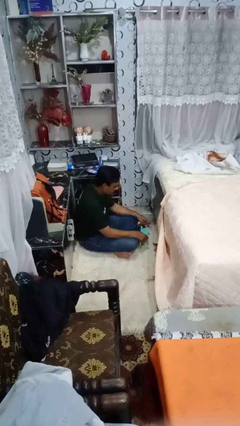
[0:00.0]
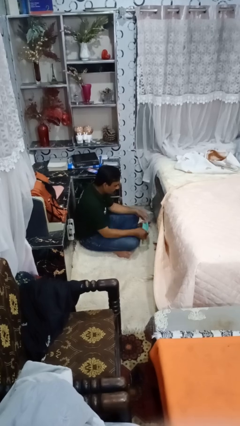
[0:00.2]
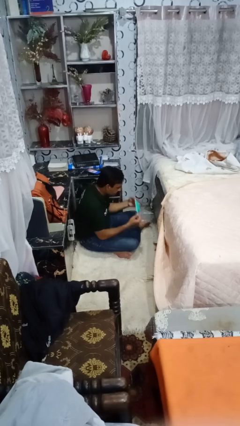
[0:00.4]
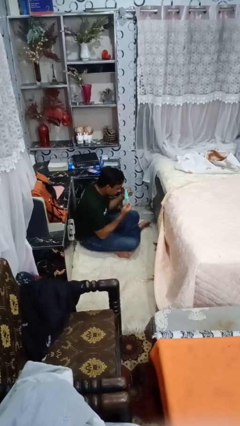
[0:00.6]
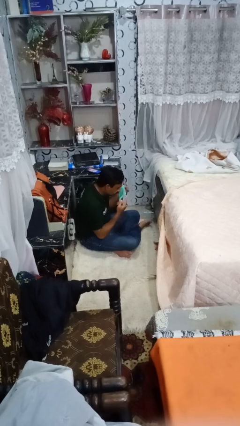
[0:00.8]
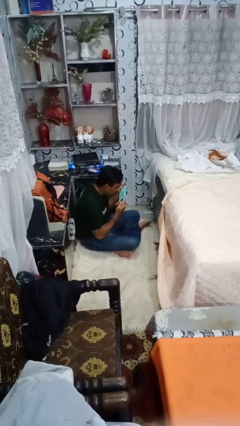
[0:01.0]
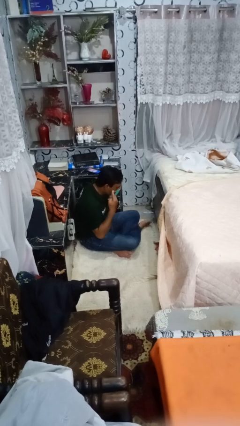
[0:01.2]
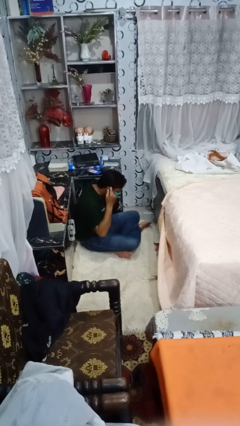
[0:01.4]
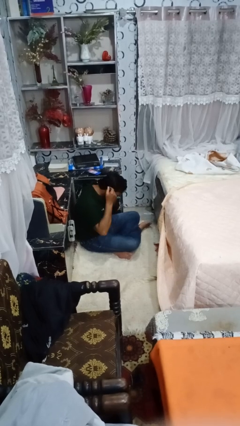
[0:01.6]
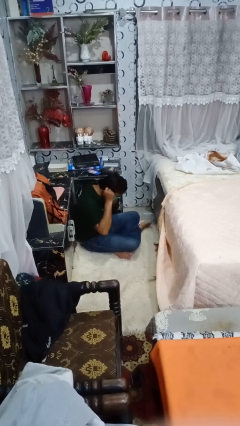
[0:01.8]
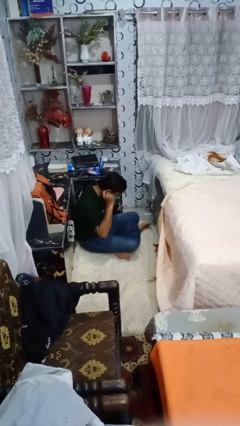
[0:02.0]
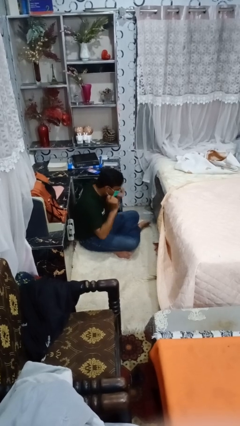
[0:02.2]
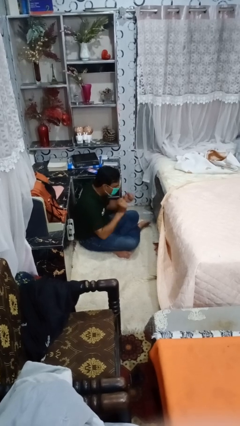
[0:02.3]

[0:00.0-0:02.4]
person puts on facemask

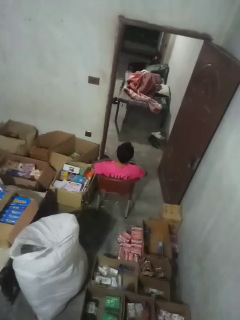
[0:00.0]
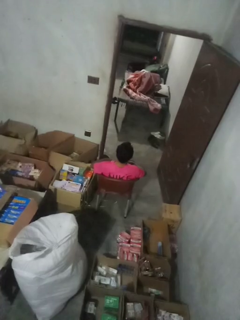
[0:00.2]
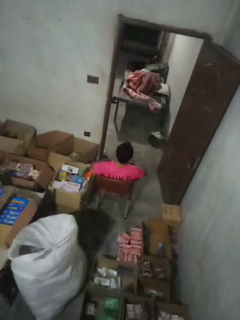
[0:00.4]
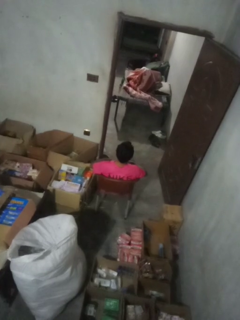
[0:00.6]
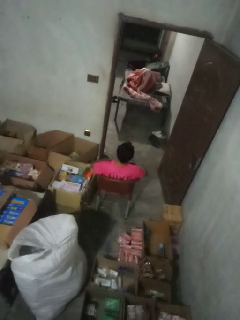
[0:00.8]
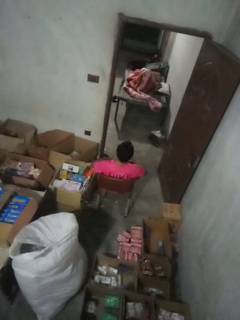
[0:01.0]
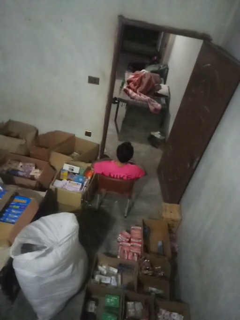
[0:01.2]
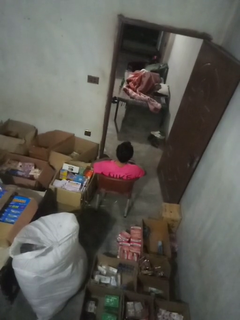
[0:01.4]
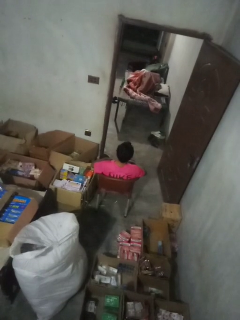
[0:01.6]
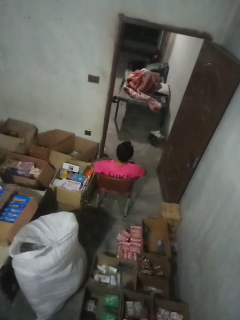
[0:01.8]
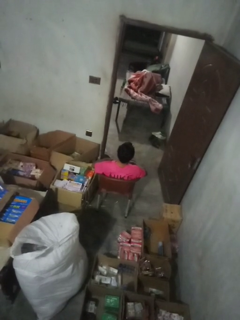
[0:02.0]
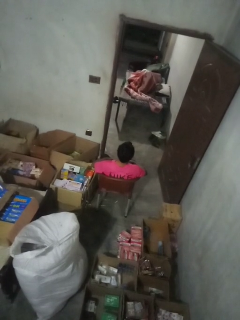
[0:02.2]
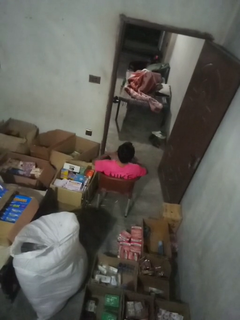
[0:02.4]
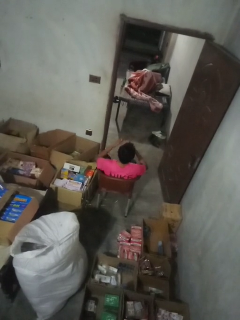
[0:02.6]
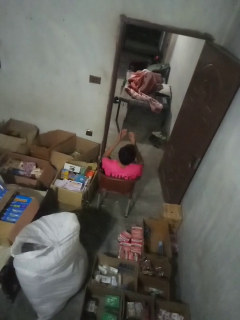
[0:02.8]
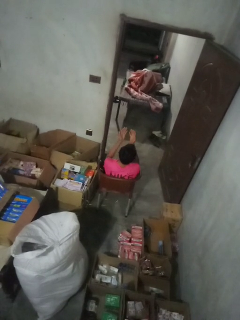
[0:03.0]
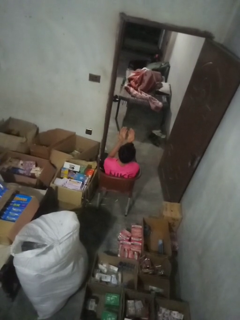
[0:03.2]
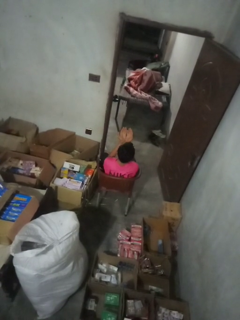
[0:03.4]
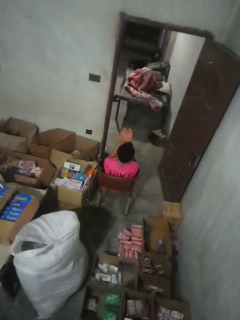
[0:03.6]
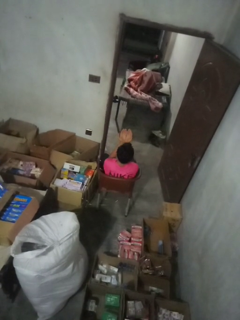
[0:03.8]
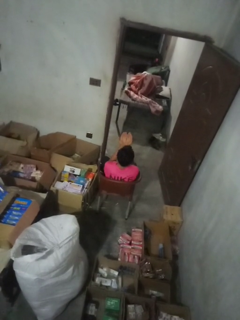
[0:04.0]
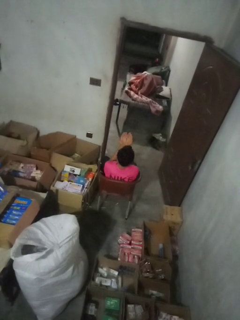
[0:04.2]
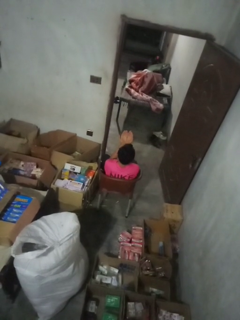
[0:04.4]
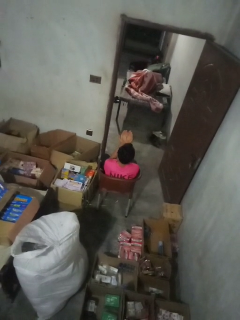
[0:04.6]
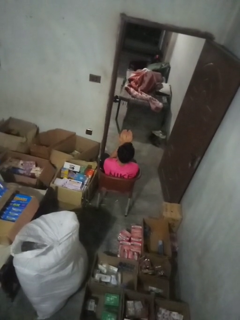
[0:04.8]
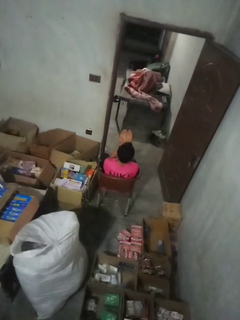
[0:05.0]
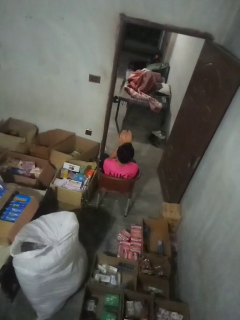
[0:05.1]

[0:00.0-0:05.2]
person prays

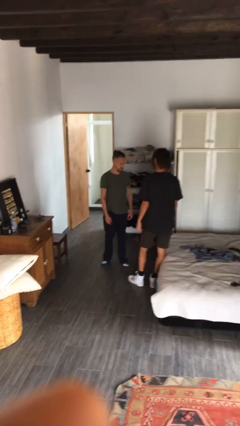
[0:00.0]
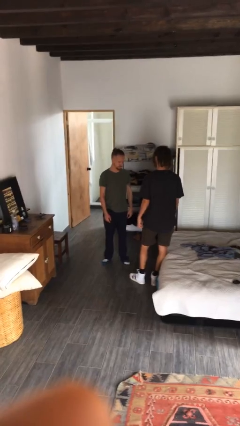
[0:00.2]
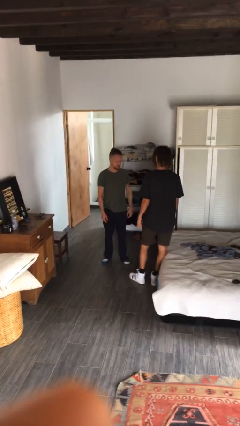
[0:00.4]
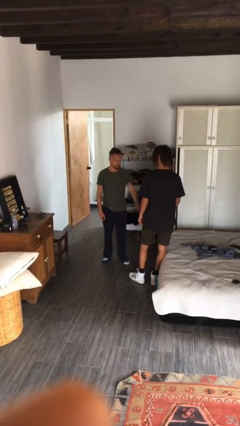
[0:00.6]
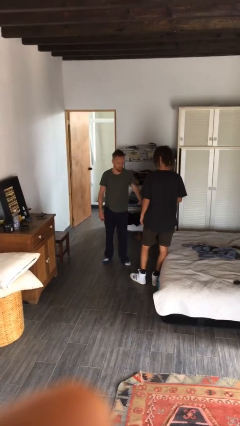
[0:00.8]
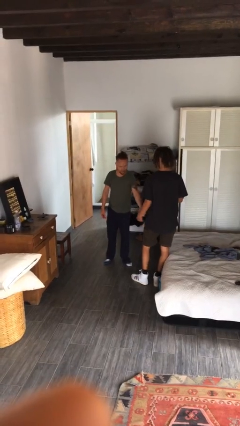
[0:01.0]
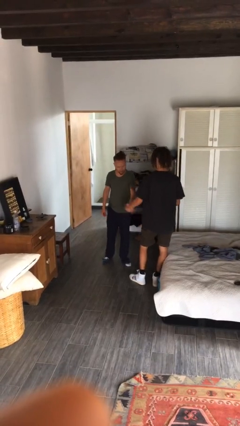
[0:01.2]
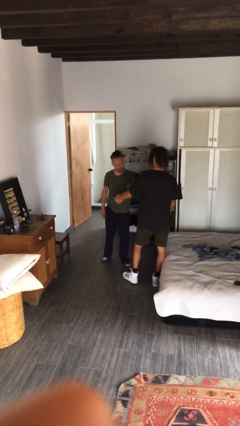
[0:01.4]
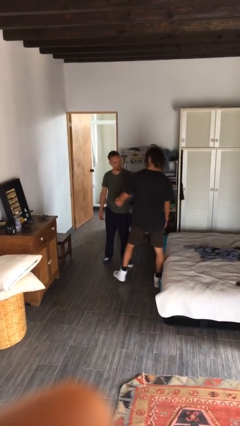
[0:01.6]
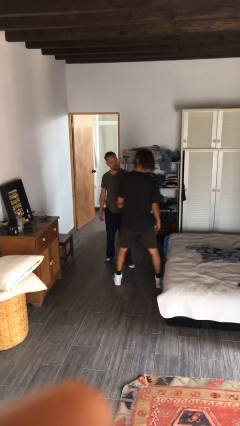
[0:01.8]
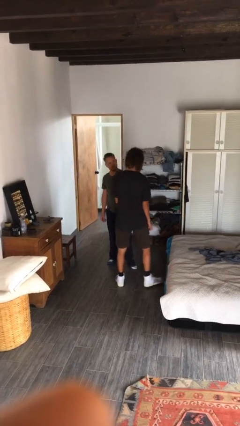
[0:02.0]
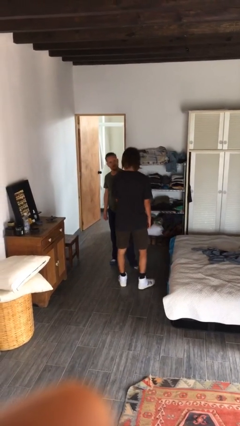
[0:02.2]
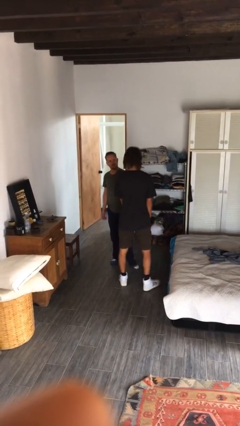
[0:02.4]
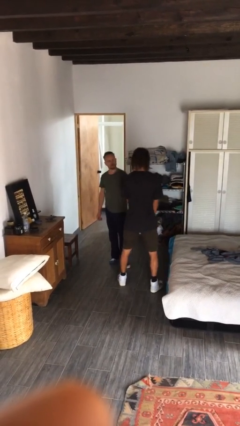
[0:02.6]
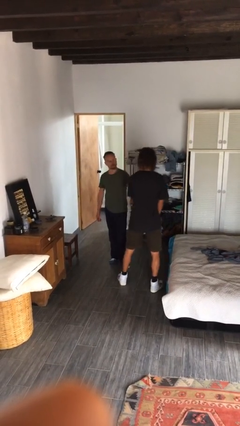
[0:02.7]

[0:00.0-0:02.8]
person grabs person by forearm

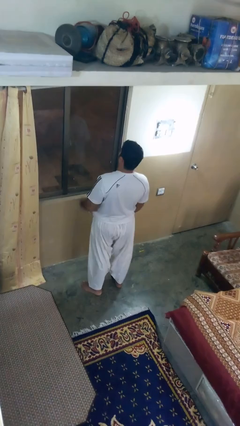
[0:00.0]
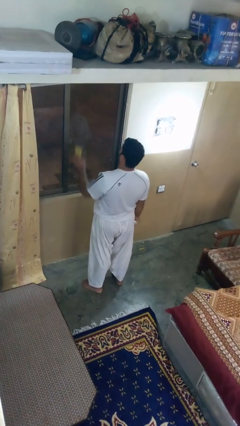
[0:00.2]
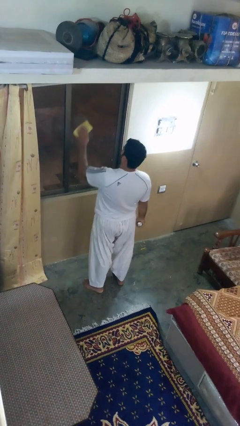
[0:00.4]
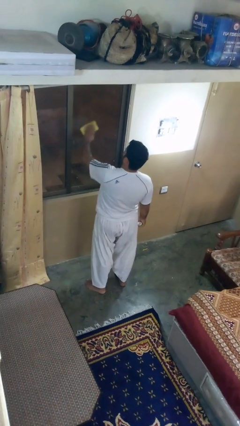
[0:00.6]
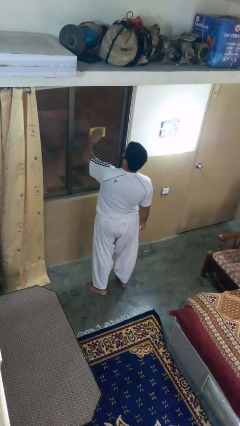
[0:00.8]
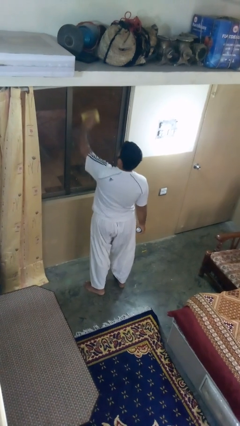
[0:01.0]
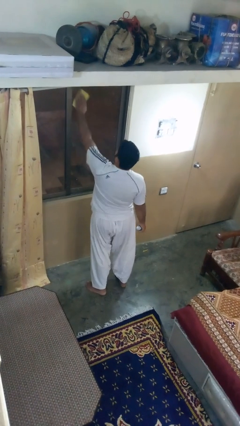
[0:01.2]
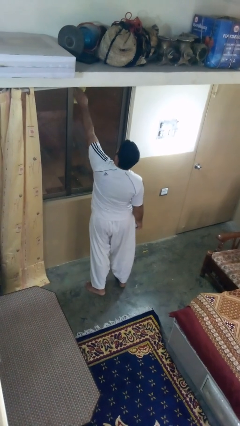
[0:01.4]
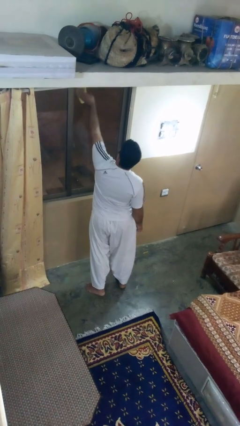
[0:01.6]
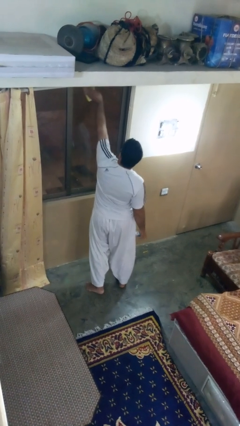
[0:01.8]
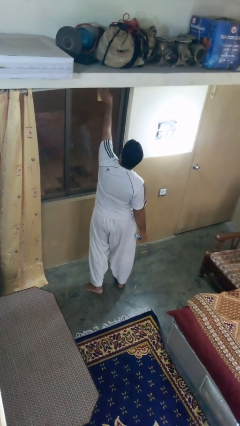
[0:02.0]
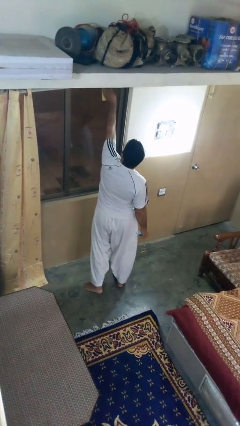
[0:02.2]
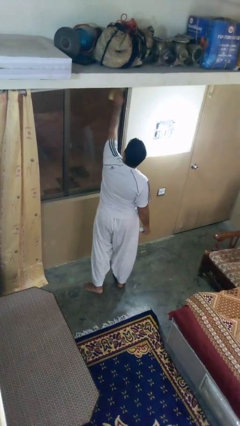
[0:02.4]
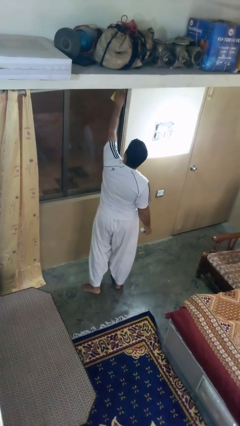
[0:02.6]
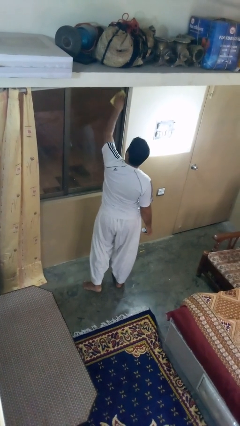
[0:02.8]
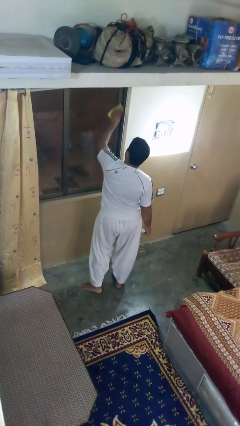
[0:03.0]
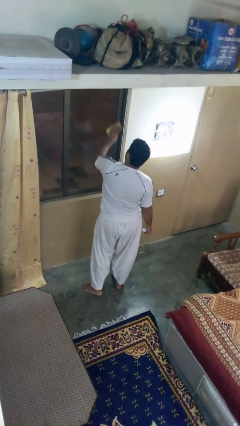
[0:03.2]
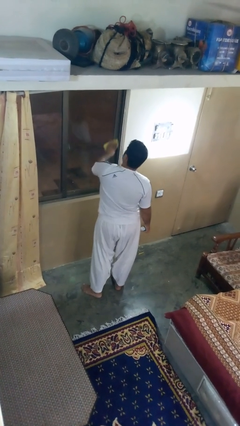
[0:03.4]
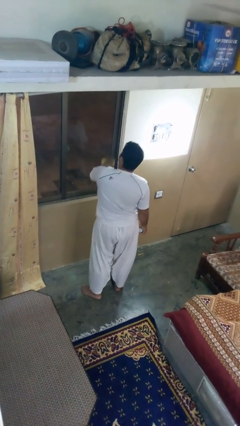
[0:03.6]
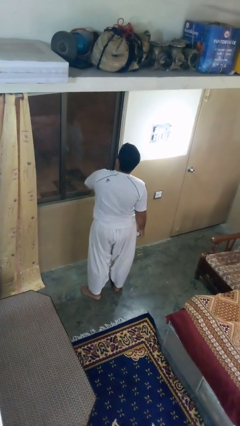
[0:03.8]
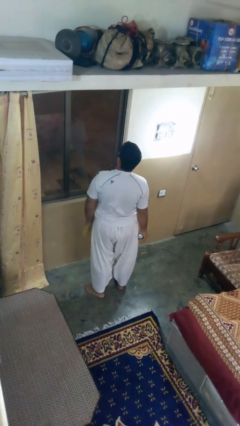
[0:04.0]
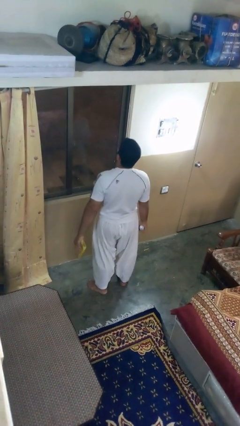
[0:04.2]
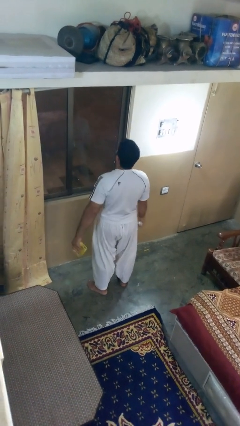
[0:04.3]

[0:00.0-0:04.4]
person washes window

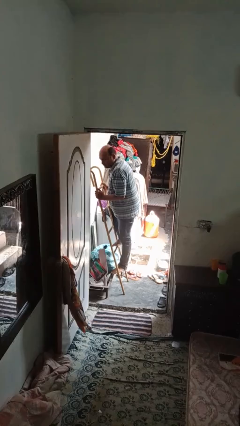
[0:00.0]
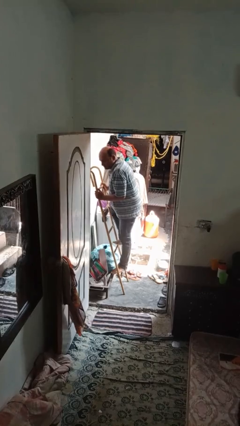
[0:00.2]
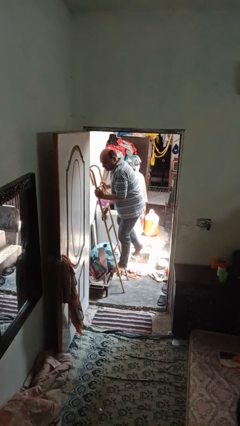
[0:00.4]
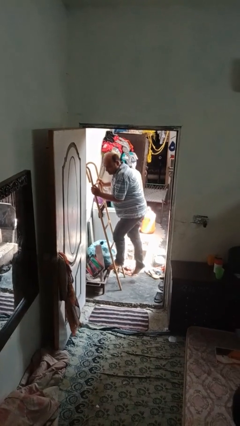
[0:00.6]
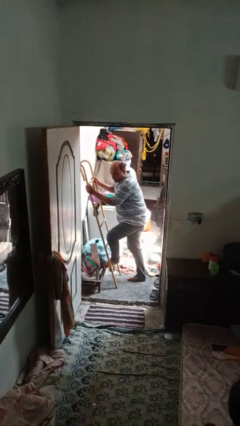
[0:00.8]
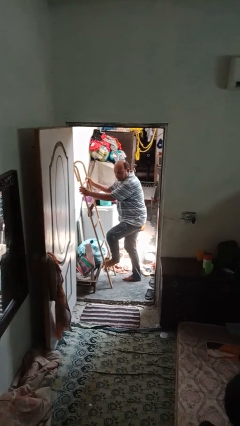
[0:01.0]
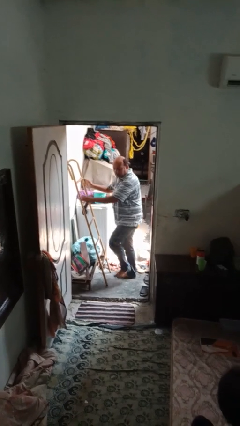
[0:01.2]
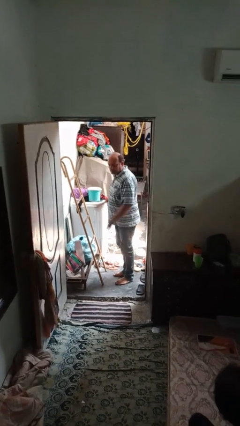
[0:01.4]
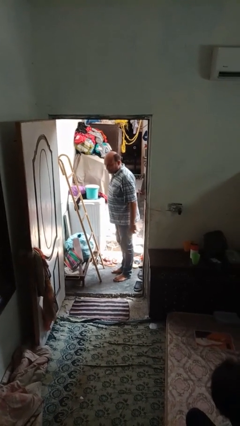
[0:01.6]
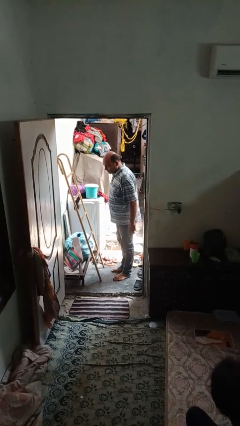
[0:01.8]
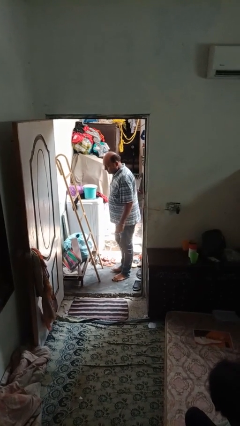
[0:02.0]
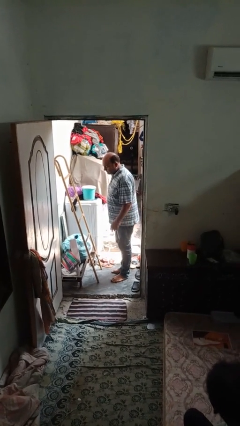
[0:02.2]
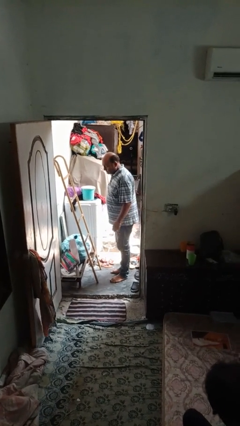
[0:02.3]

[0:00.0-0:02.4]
person climbs down ladder

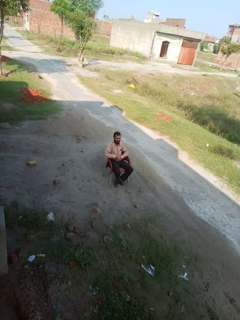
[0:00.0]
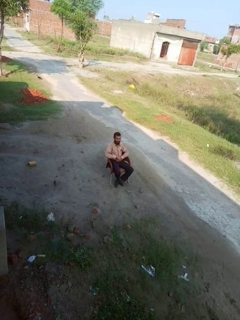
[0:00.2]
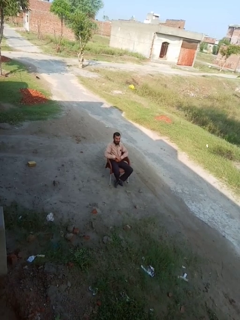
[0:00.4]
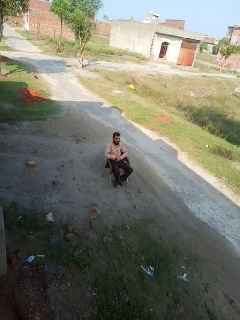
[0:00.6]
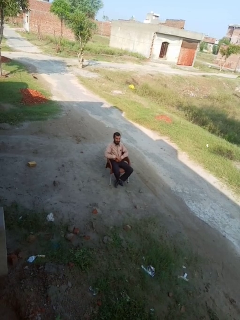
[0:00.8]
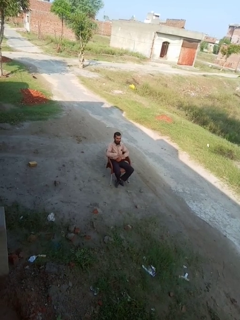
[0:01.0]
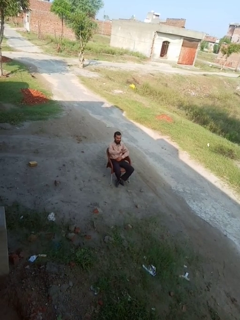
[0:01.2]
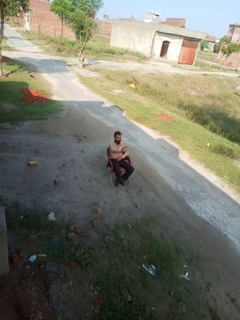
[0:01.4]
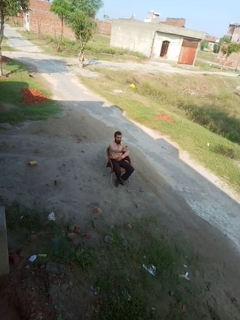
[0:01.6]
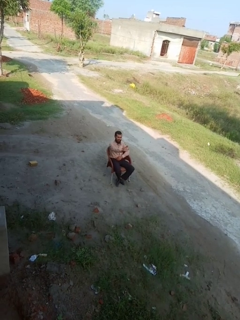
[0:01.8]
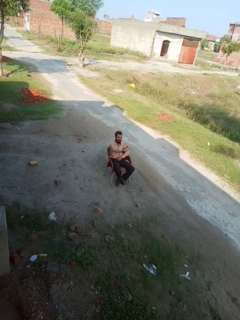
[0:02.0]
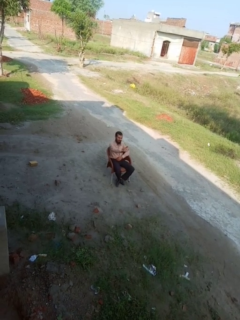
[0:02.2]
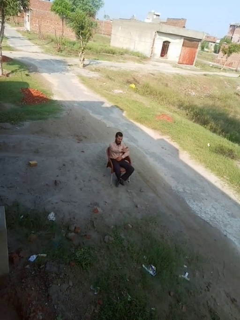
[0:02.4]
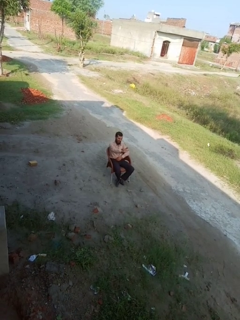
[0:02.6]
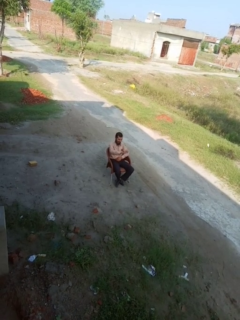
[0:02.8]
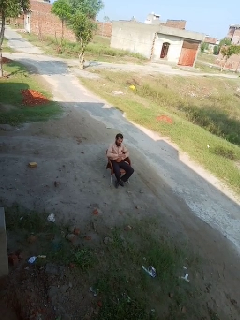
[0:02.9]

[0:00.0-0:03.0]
person gestures stop
